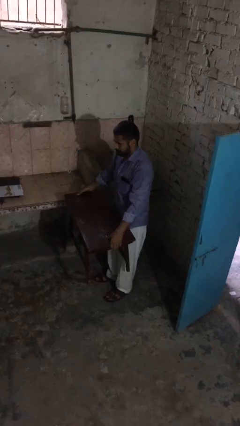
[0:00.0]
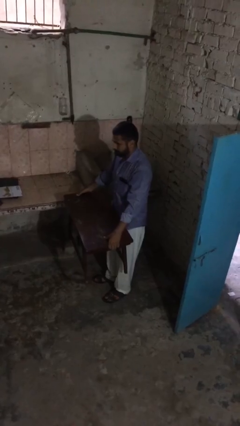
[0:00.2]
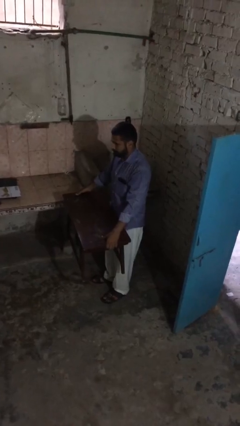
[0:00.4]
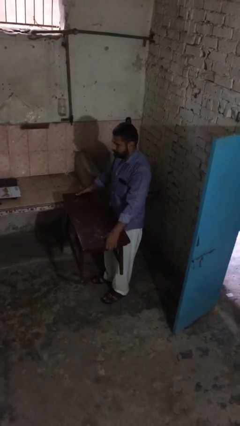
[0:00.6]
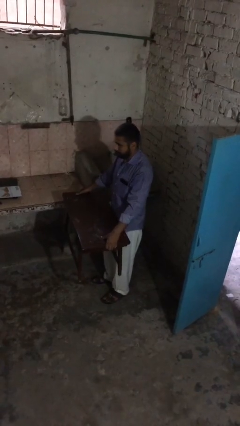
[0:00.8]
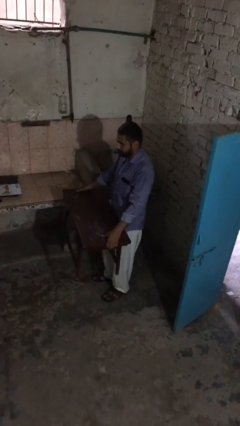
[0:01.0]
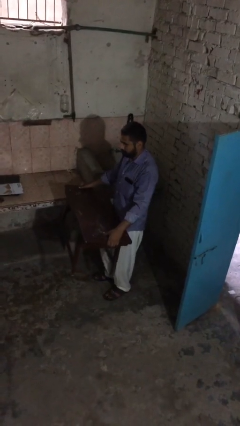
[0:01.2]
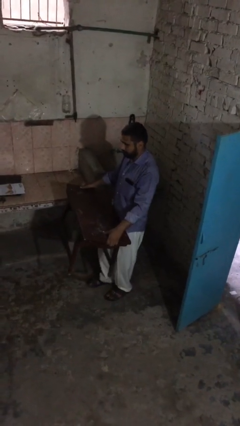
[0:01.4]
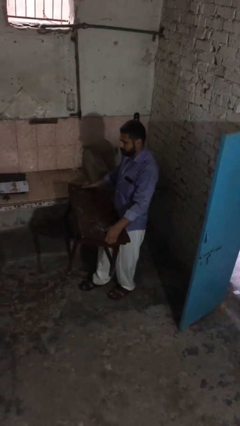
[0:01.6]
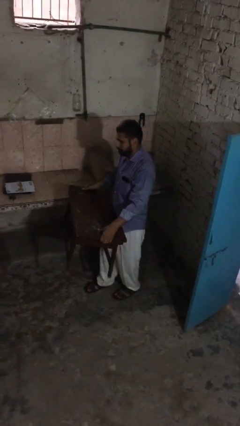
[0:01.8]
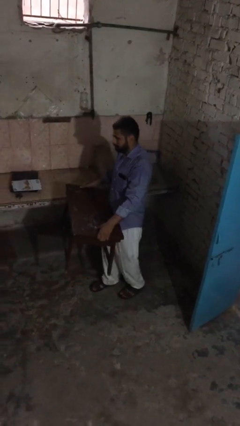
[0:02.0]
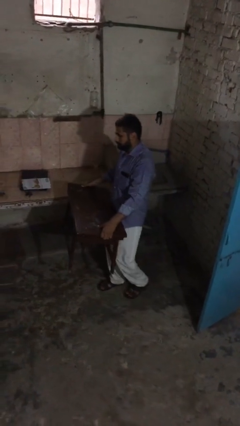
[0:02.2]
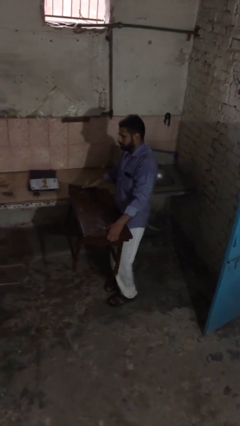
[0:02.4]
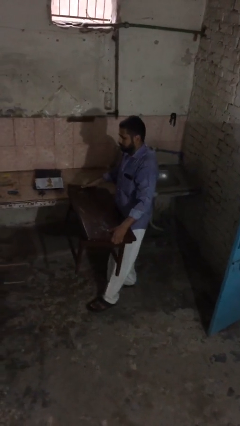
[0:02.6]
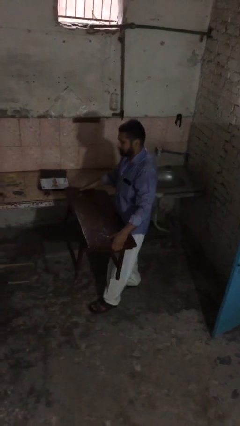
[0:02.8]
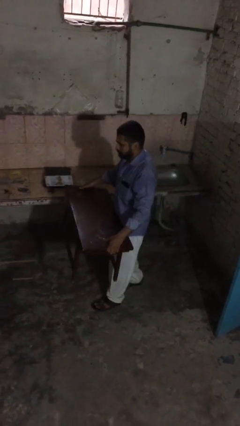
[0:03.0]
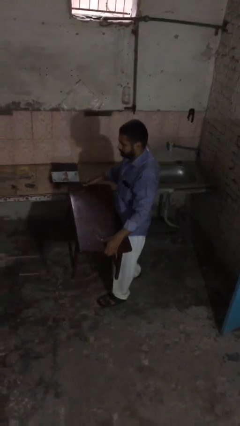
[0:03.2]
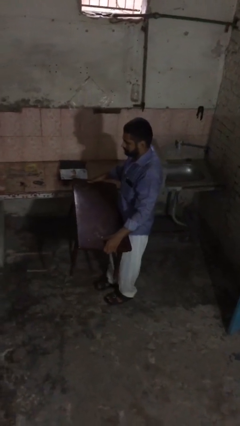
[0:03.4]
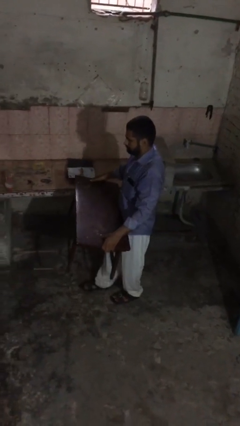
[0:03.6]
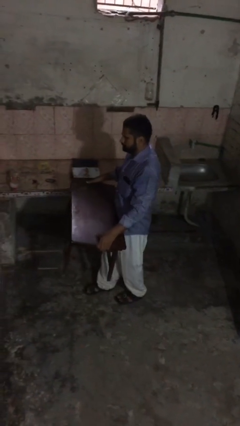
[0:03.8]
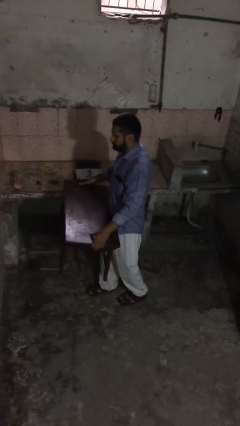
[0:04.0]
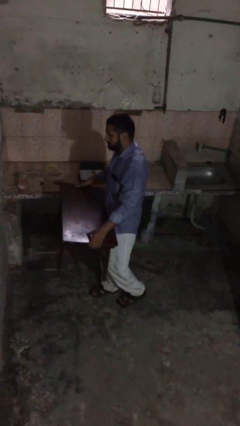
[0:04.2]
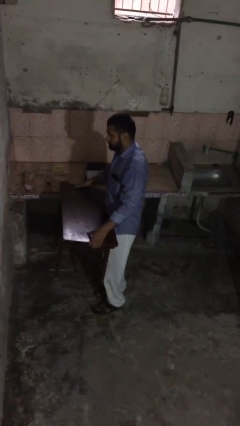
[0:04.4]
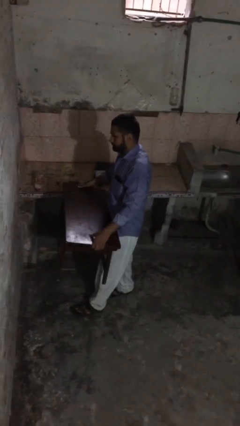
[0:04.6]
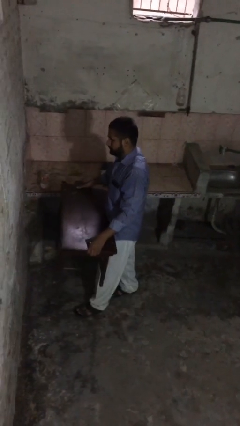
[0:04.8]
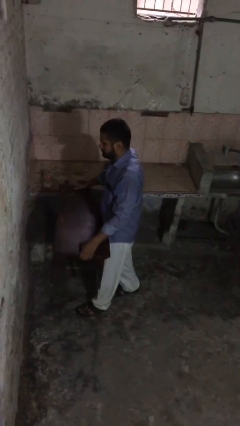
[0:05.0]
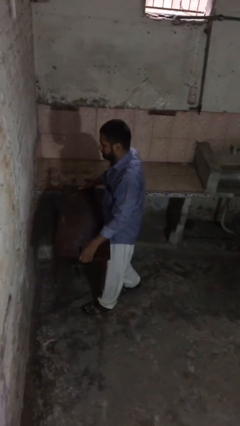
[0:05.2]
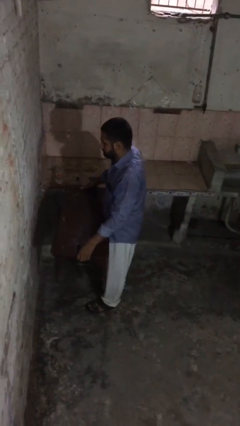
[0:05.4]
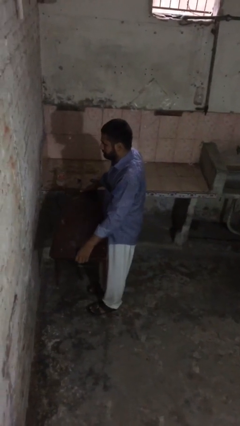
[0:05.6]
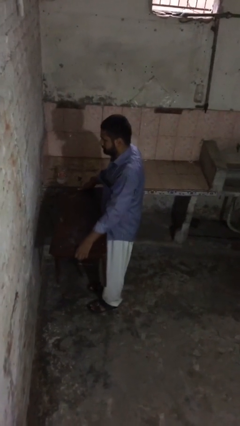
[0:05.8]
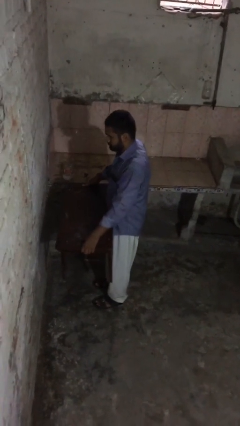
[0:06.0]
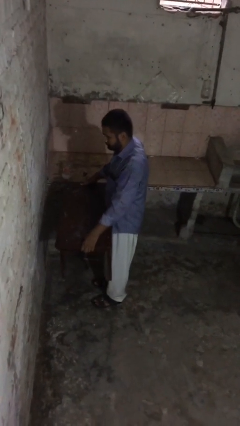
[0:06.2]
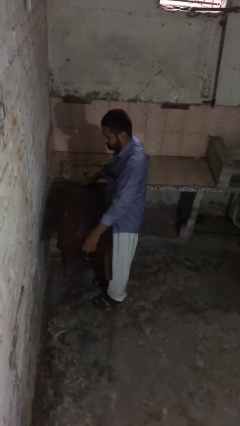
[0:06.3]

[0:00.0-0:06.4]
person carries heavy object

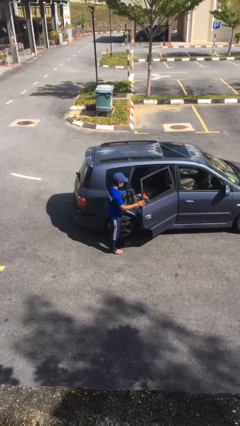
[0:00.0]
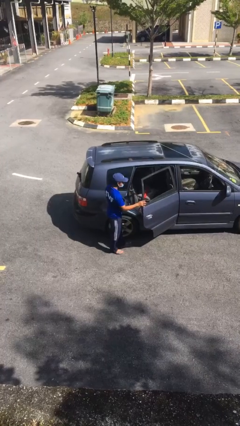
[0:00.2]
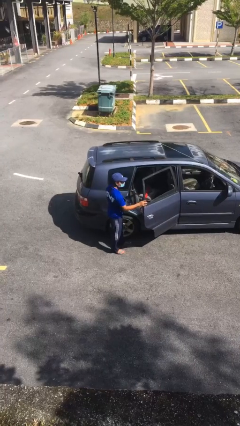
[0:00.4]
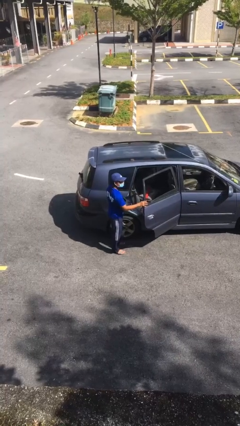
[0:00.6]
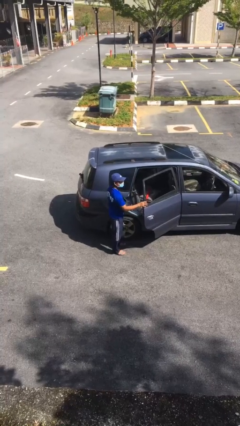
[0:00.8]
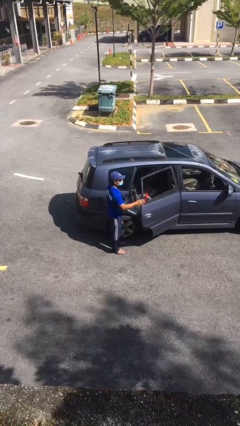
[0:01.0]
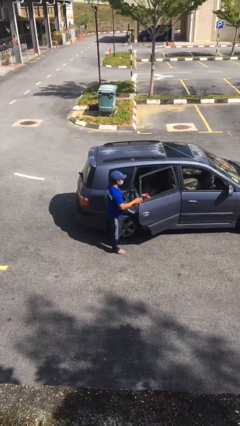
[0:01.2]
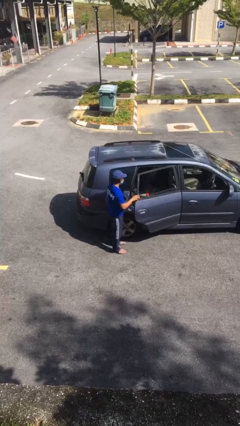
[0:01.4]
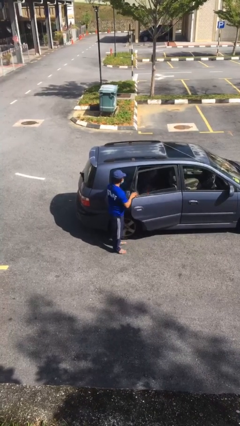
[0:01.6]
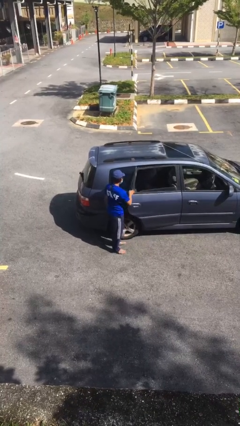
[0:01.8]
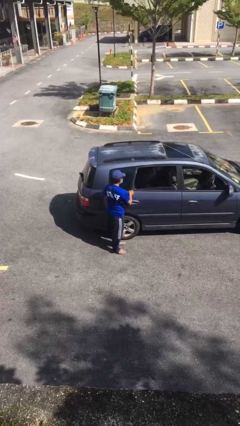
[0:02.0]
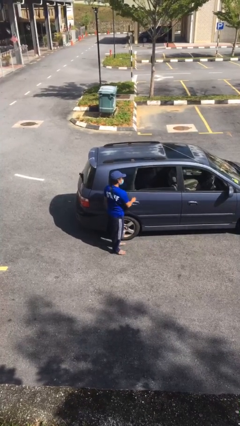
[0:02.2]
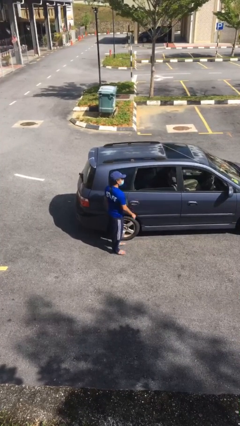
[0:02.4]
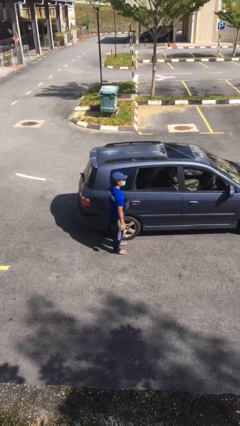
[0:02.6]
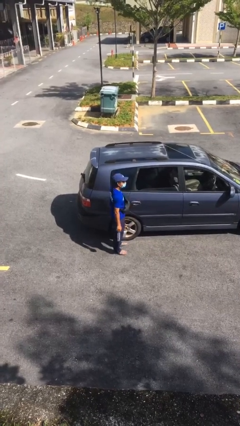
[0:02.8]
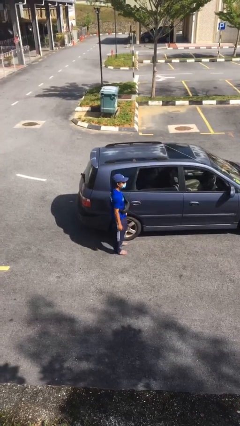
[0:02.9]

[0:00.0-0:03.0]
person closes car door

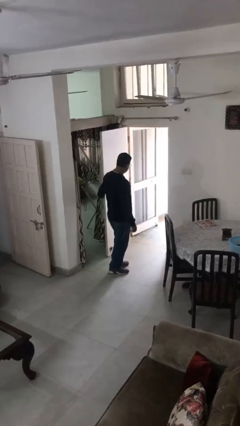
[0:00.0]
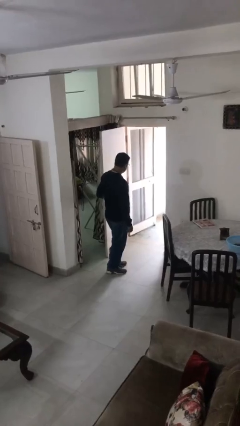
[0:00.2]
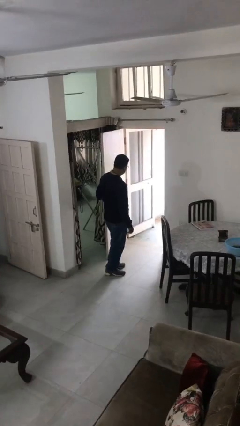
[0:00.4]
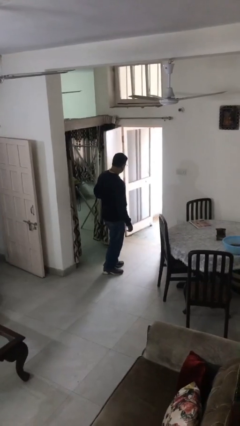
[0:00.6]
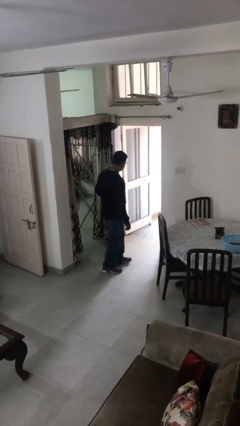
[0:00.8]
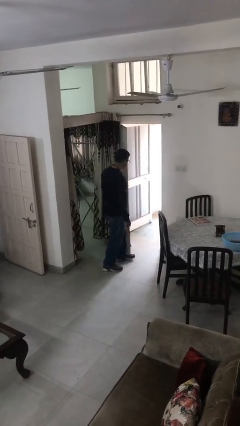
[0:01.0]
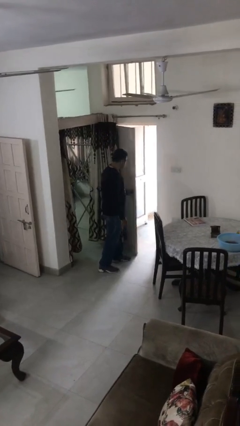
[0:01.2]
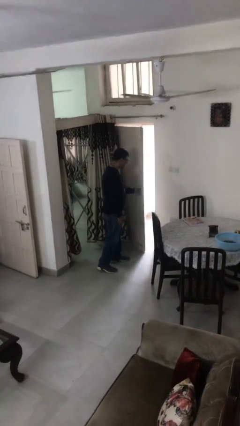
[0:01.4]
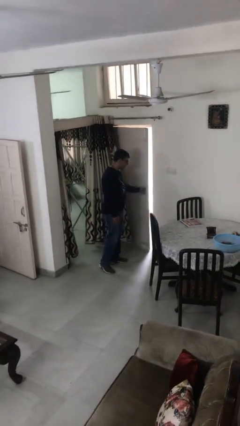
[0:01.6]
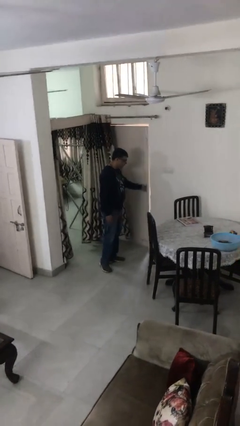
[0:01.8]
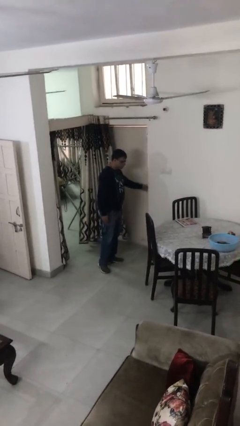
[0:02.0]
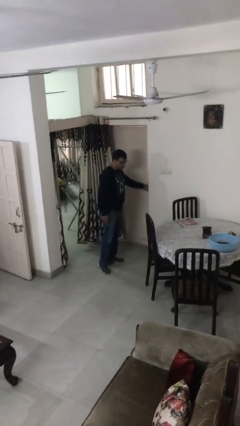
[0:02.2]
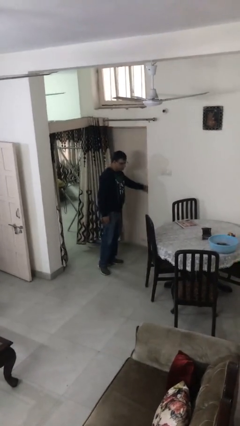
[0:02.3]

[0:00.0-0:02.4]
person closes facility door

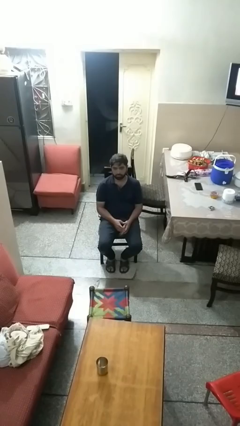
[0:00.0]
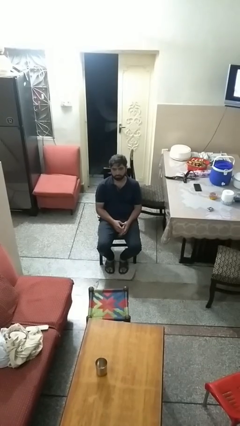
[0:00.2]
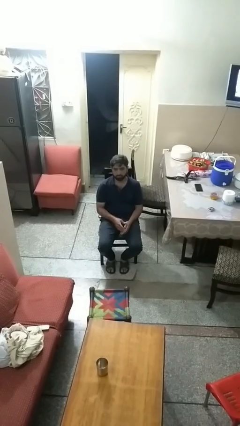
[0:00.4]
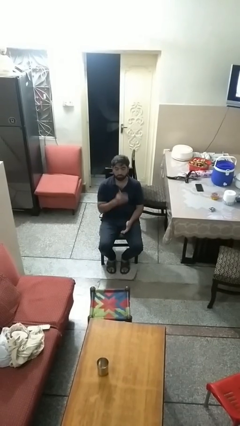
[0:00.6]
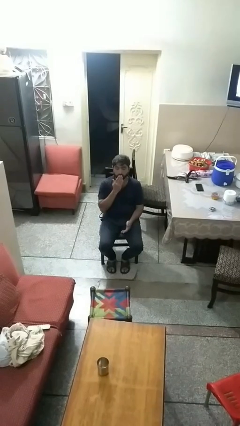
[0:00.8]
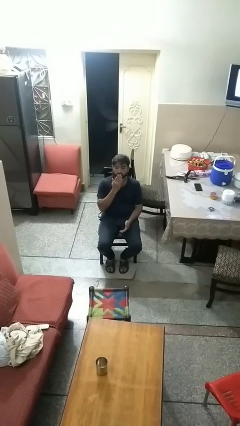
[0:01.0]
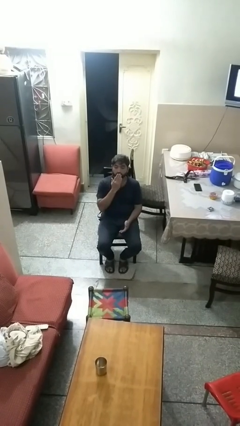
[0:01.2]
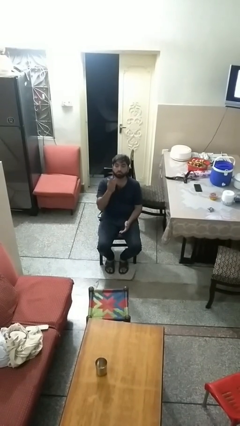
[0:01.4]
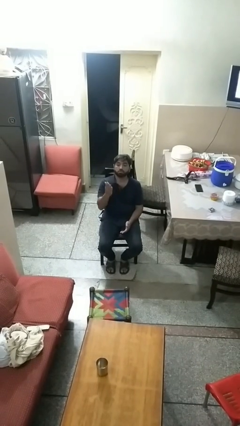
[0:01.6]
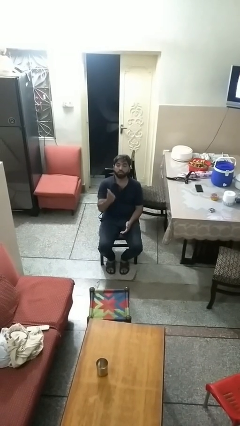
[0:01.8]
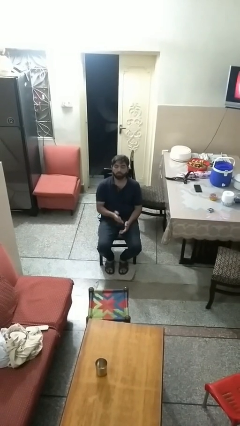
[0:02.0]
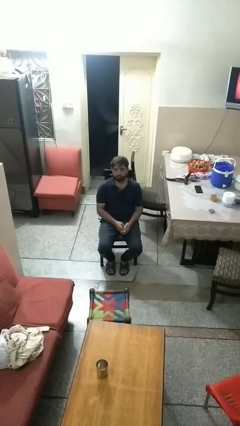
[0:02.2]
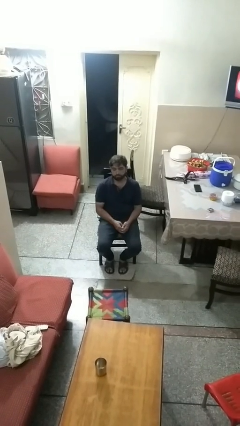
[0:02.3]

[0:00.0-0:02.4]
person gestures blow kiss

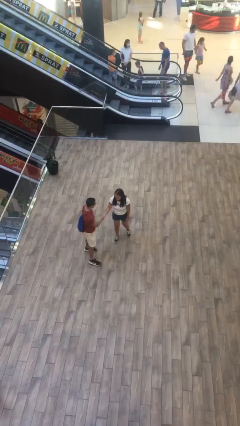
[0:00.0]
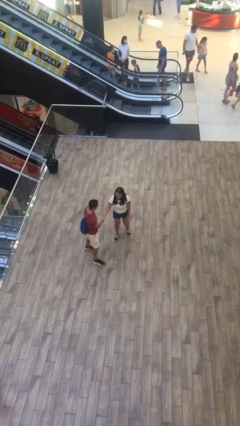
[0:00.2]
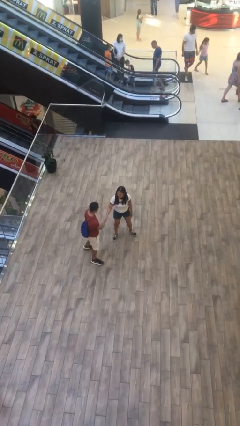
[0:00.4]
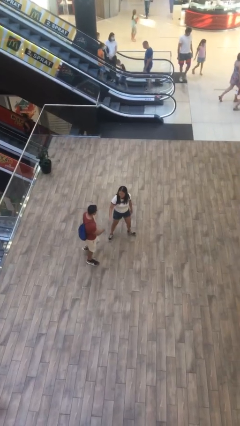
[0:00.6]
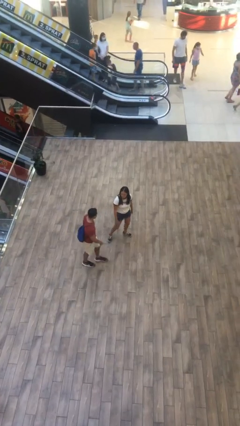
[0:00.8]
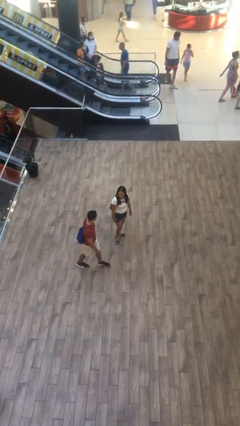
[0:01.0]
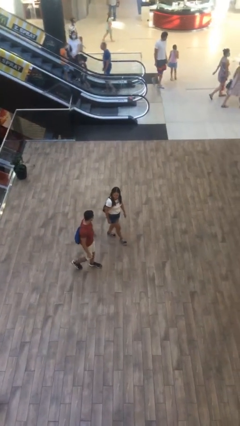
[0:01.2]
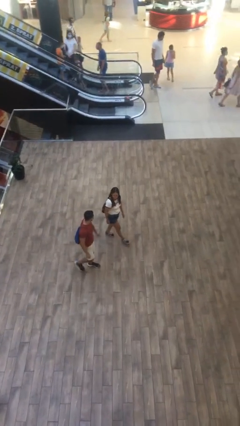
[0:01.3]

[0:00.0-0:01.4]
person shakes hand

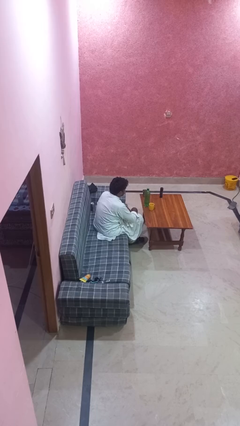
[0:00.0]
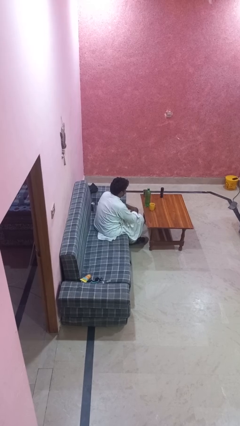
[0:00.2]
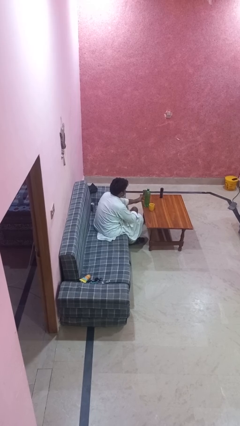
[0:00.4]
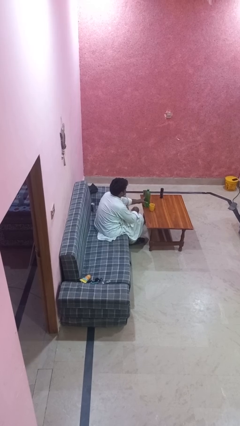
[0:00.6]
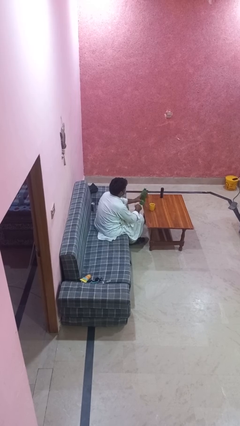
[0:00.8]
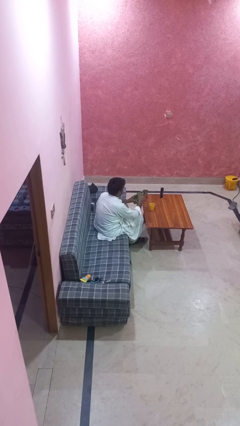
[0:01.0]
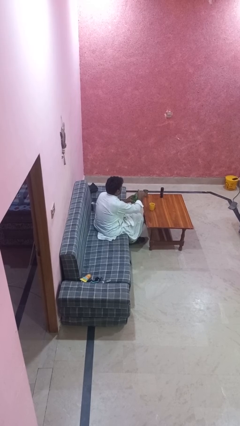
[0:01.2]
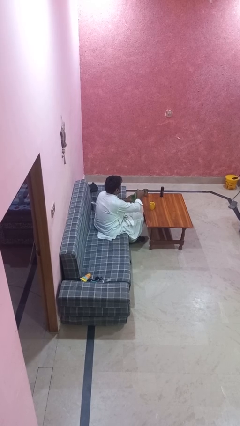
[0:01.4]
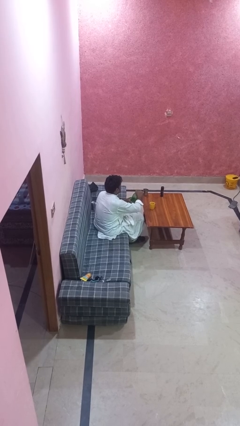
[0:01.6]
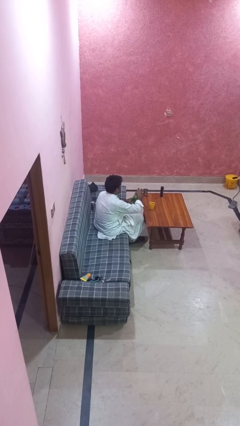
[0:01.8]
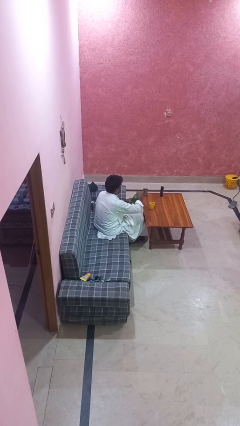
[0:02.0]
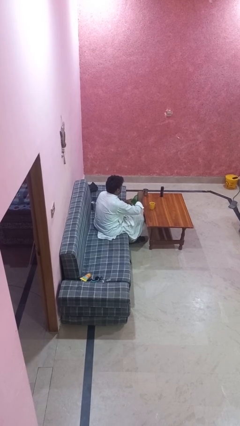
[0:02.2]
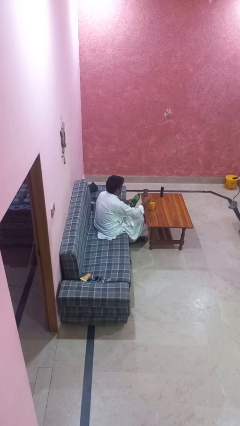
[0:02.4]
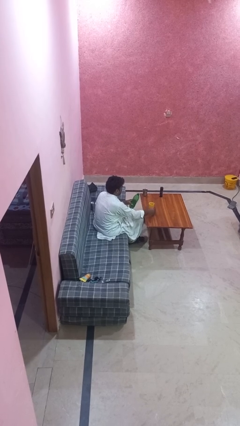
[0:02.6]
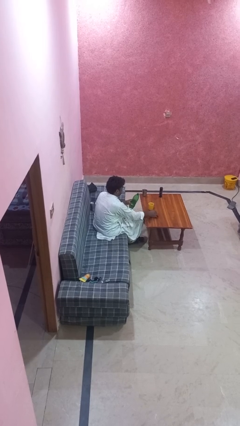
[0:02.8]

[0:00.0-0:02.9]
person unscrews lid from bottle
